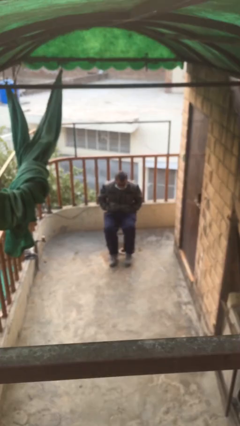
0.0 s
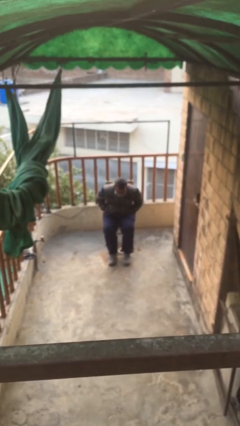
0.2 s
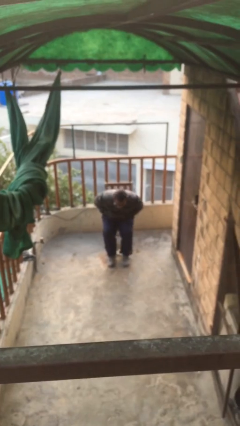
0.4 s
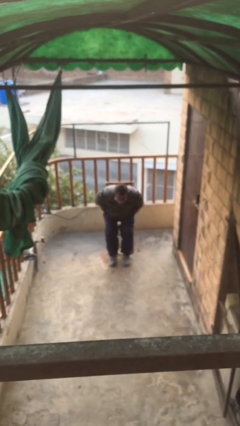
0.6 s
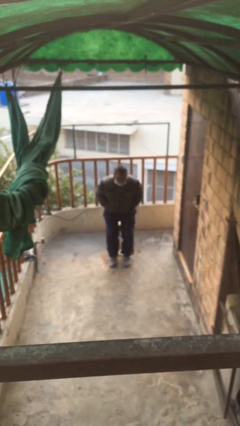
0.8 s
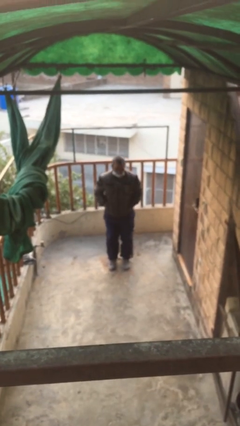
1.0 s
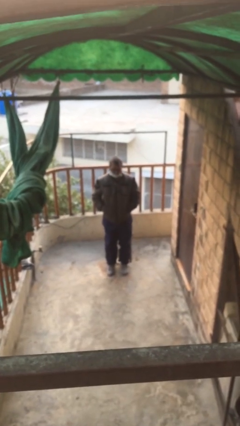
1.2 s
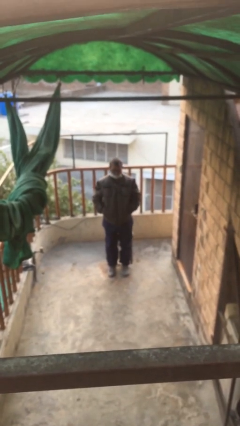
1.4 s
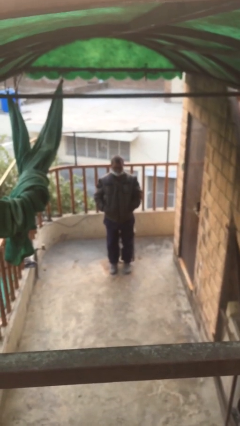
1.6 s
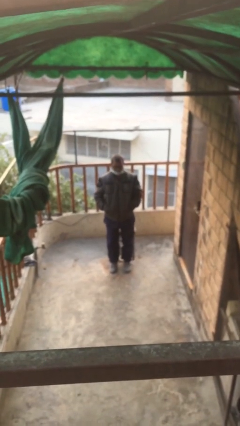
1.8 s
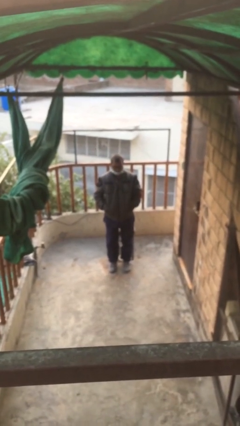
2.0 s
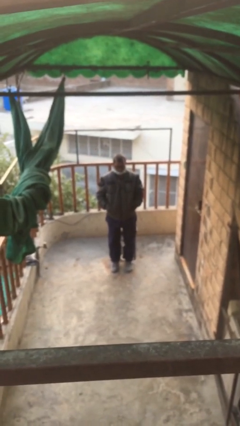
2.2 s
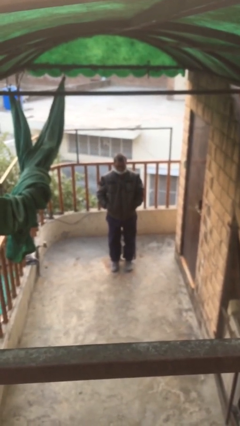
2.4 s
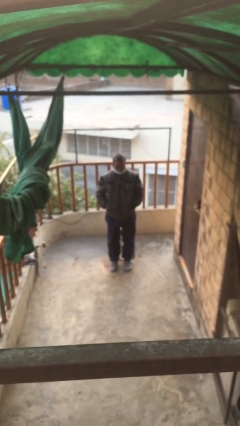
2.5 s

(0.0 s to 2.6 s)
person stands up

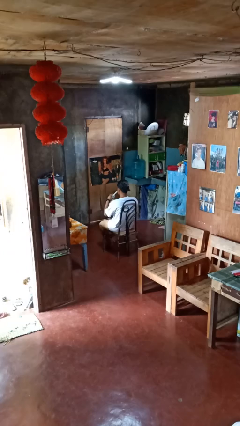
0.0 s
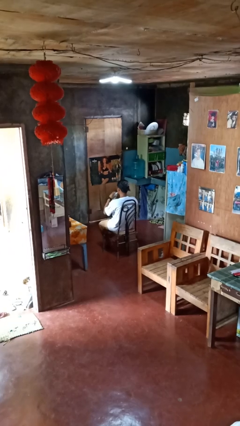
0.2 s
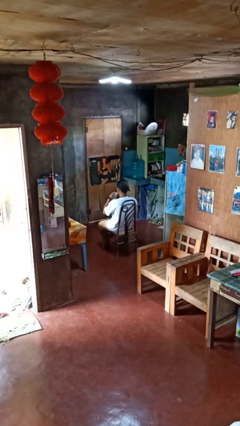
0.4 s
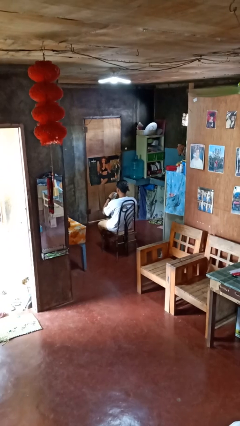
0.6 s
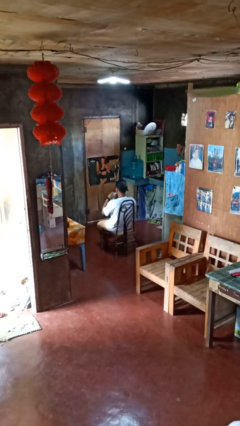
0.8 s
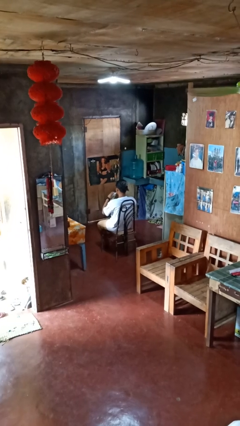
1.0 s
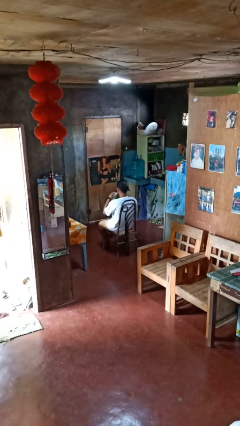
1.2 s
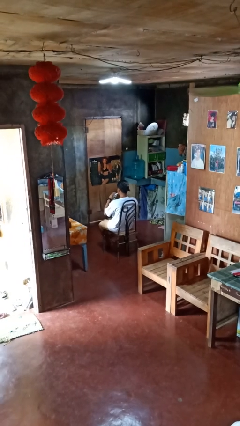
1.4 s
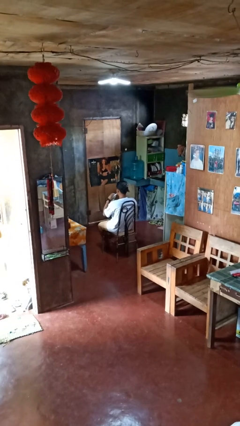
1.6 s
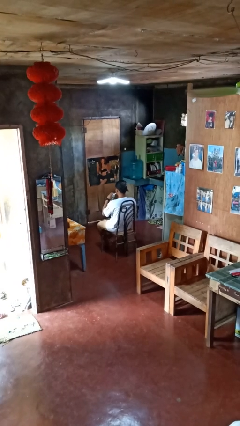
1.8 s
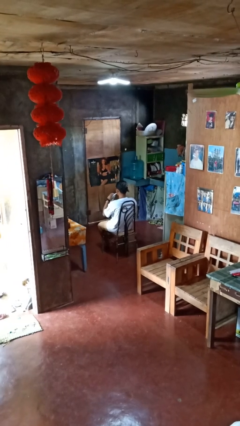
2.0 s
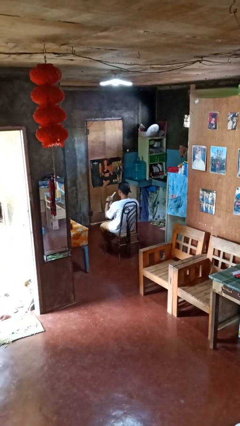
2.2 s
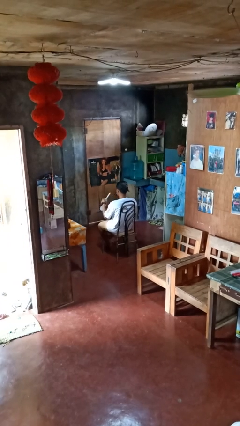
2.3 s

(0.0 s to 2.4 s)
person drinks from straw

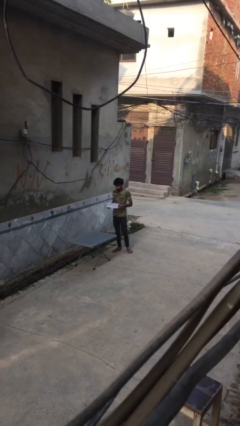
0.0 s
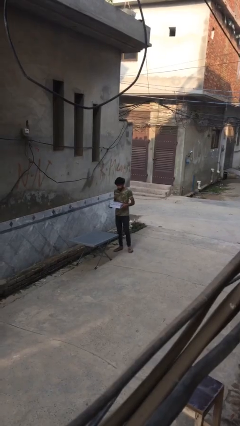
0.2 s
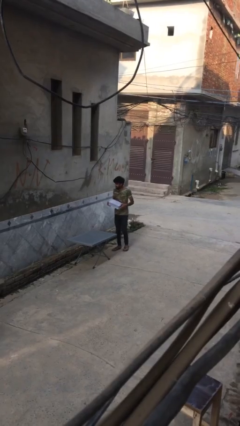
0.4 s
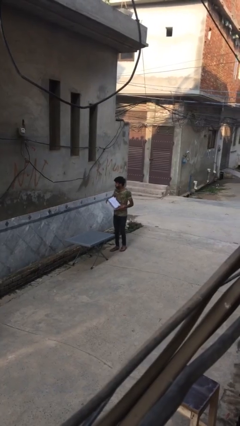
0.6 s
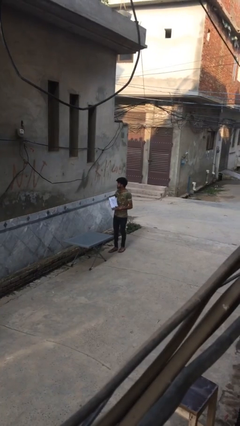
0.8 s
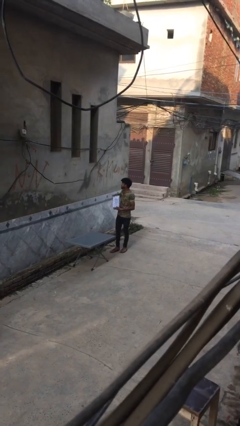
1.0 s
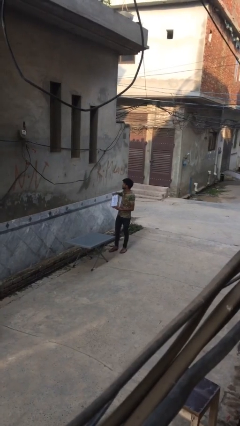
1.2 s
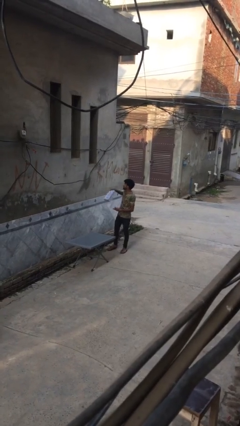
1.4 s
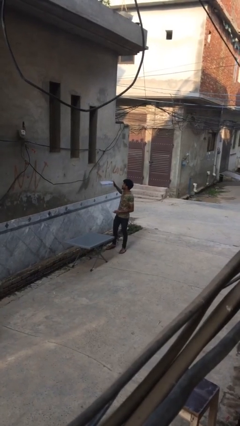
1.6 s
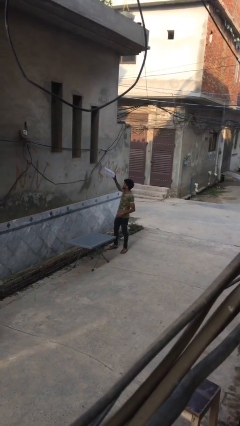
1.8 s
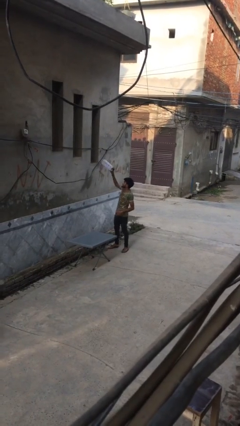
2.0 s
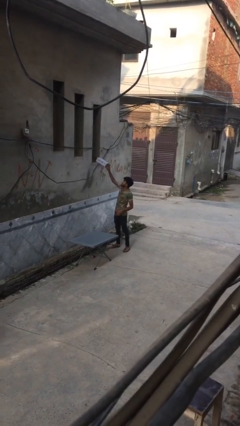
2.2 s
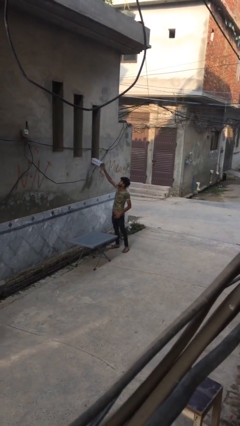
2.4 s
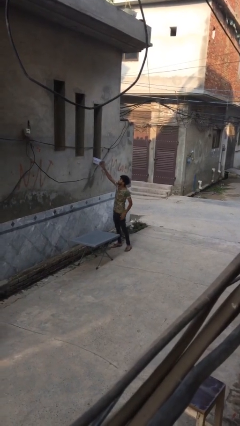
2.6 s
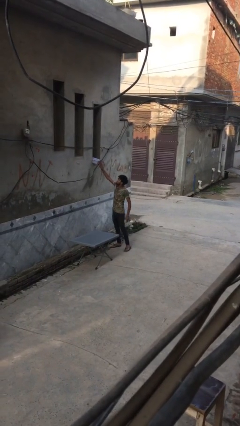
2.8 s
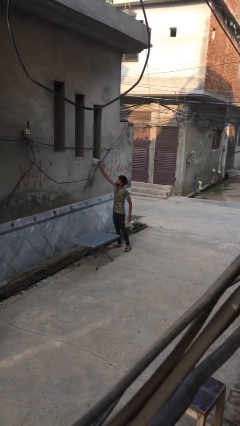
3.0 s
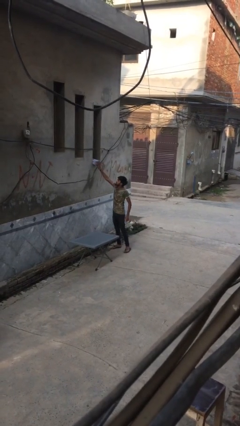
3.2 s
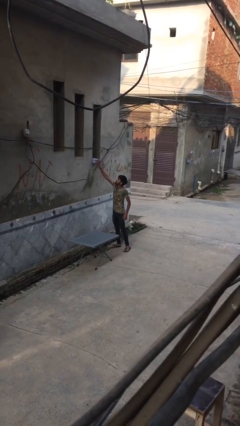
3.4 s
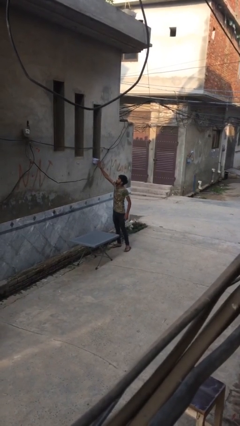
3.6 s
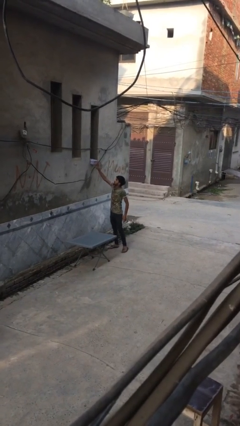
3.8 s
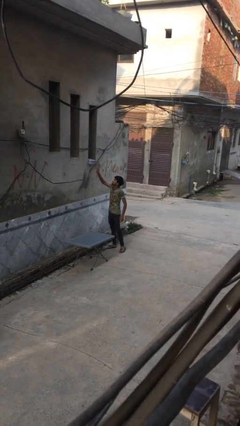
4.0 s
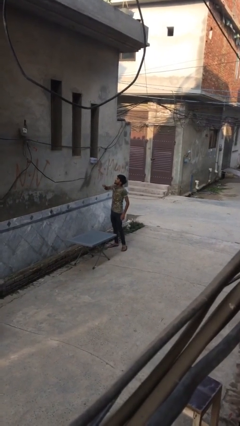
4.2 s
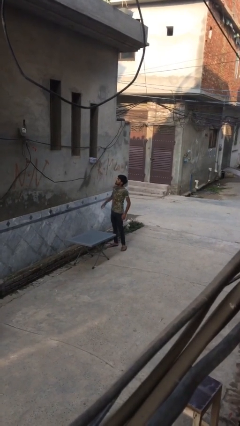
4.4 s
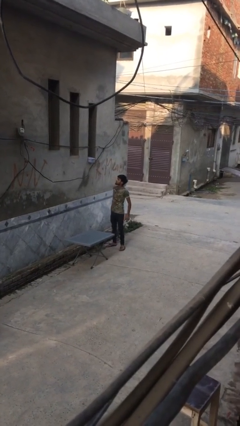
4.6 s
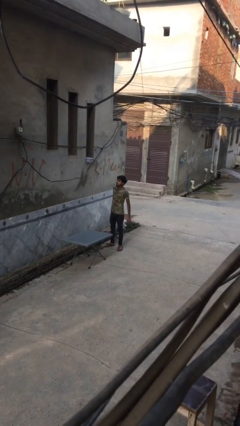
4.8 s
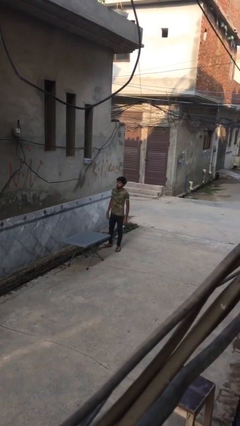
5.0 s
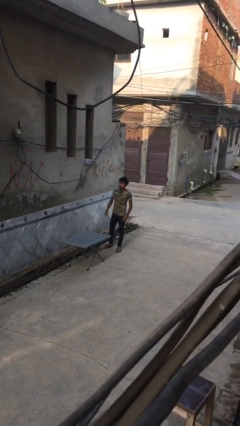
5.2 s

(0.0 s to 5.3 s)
person puts down object on shelf

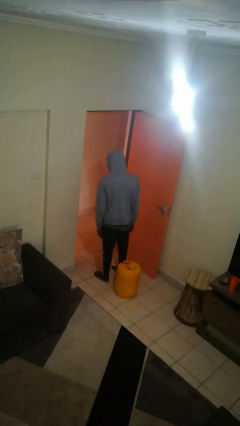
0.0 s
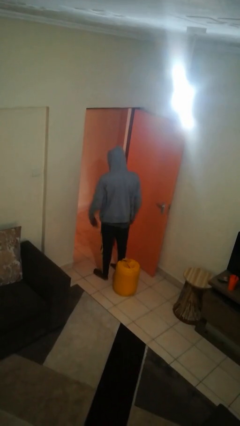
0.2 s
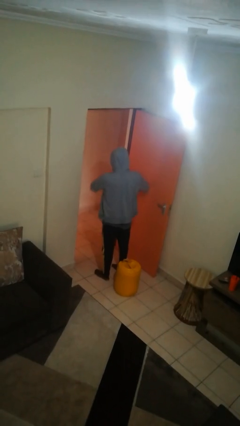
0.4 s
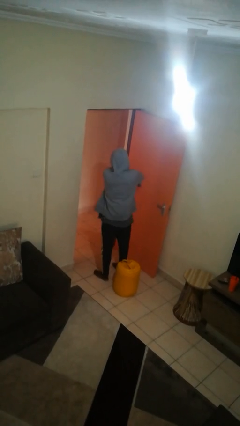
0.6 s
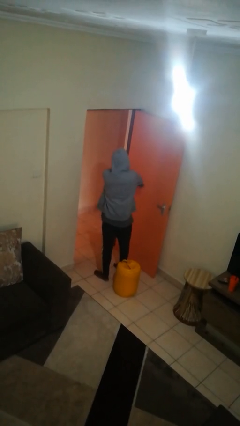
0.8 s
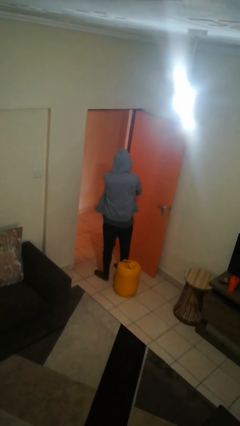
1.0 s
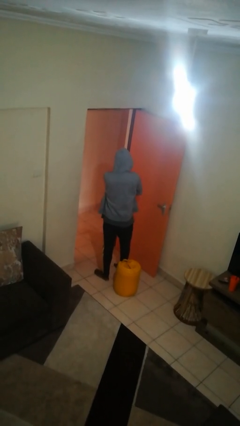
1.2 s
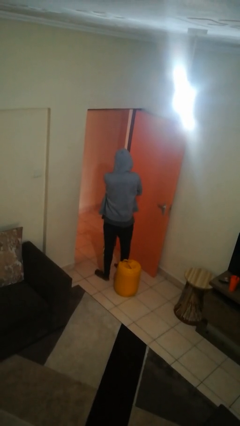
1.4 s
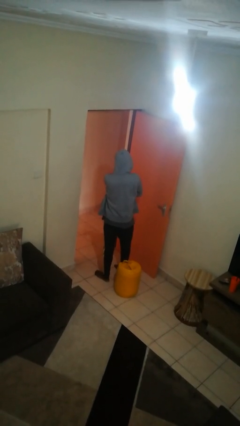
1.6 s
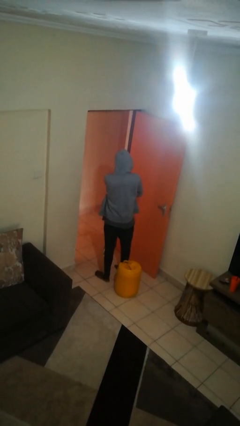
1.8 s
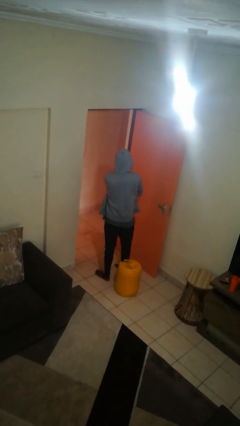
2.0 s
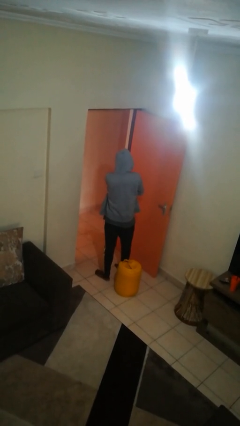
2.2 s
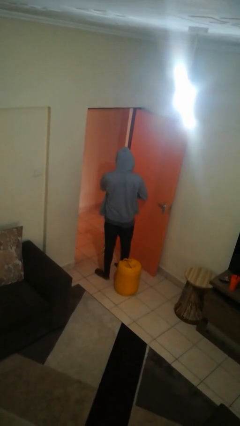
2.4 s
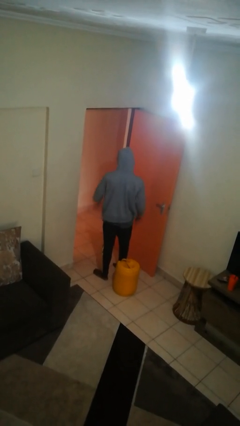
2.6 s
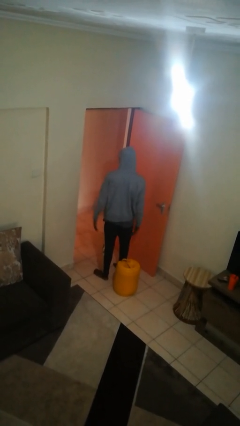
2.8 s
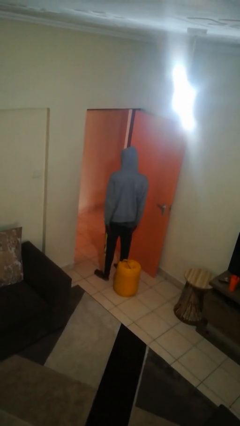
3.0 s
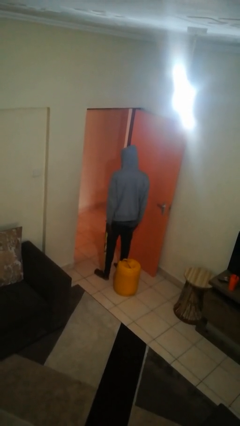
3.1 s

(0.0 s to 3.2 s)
person crosses arms

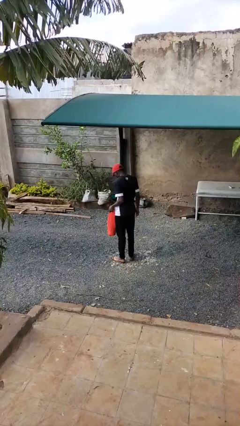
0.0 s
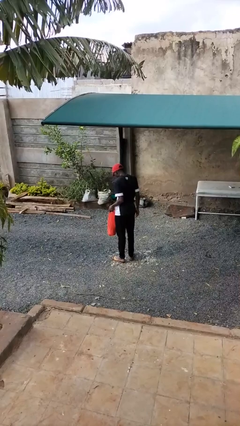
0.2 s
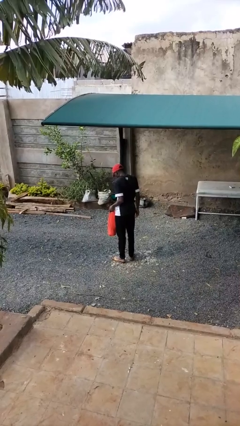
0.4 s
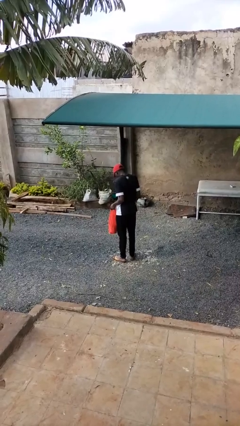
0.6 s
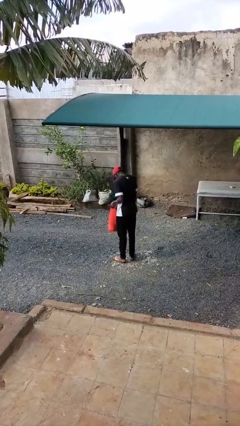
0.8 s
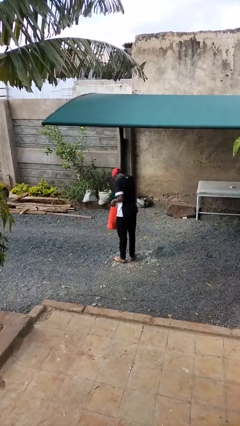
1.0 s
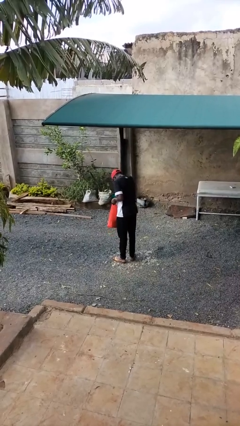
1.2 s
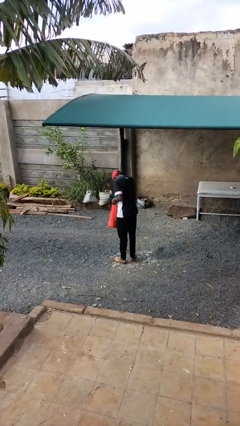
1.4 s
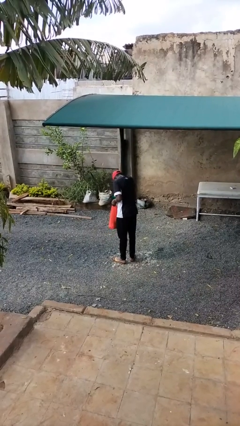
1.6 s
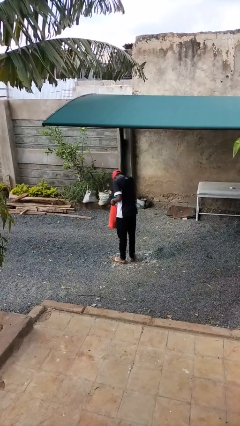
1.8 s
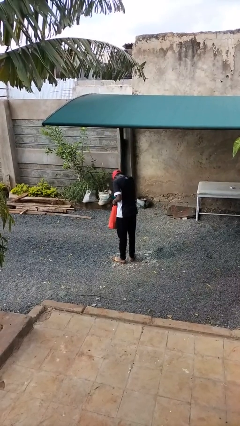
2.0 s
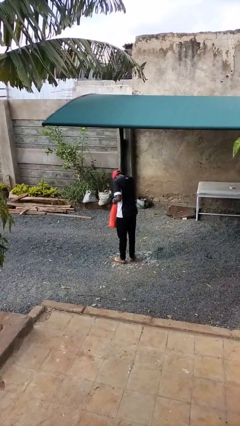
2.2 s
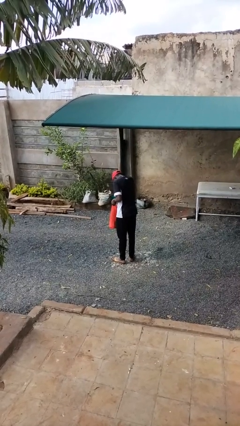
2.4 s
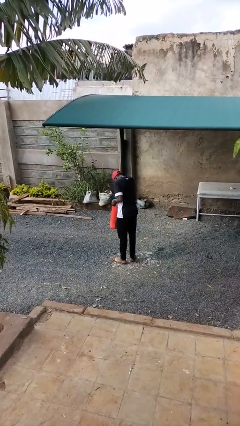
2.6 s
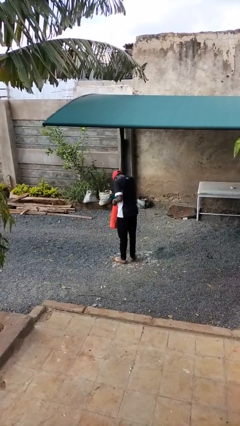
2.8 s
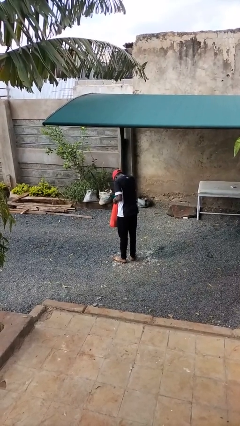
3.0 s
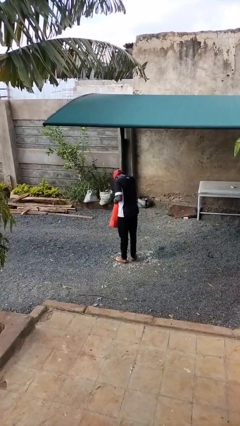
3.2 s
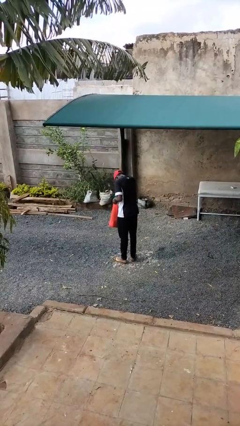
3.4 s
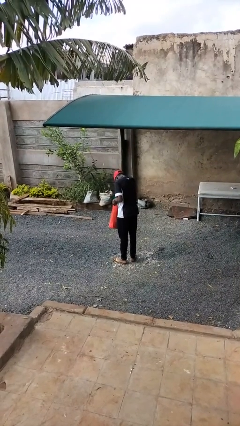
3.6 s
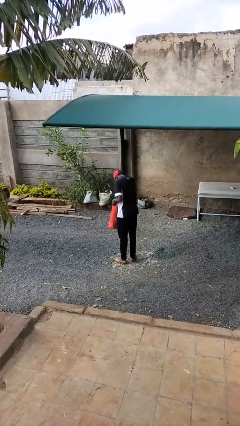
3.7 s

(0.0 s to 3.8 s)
person searches in bag

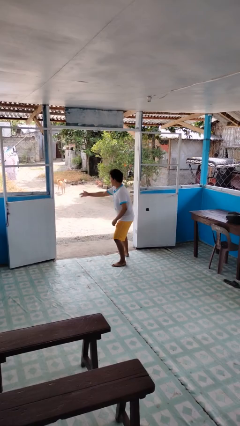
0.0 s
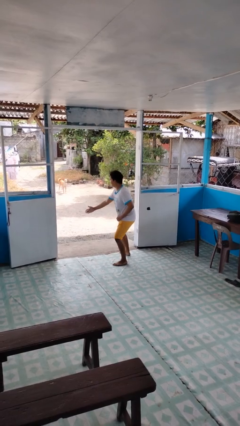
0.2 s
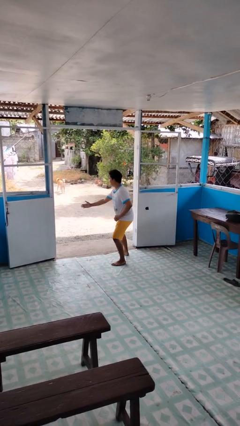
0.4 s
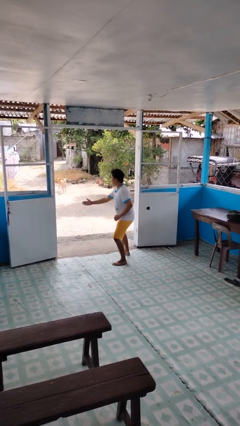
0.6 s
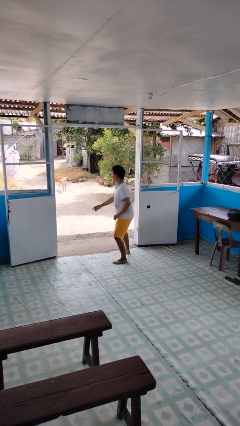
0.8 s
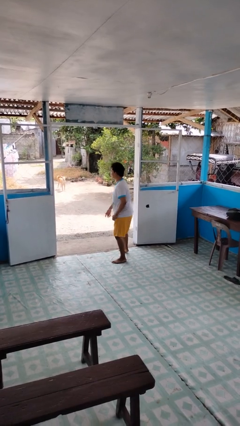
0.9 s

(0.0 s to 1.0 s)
person karate chop
